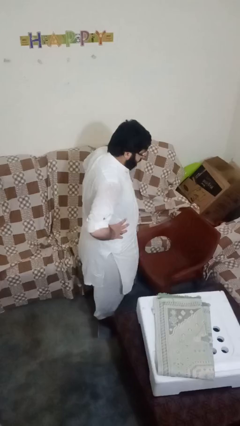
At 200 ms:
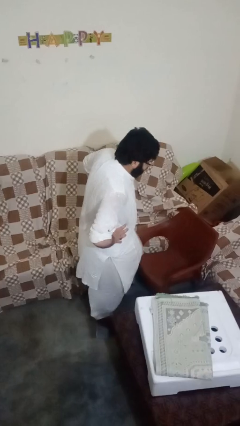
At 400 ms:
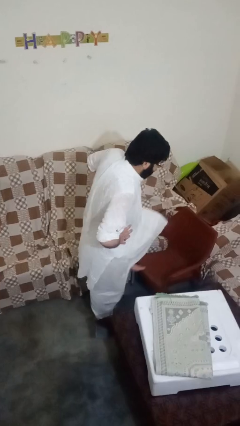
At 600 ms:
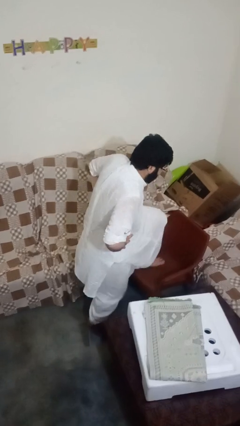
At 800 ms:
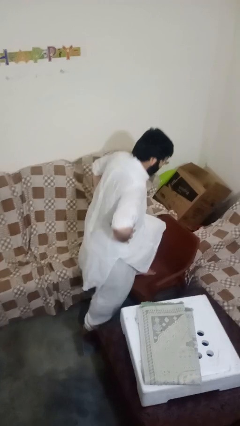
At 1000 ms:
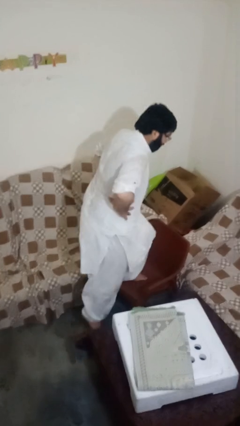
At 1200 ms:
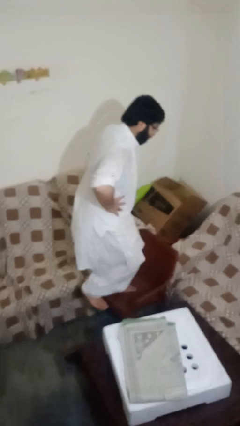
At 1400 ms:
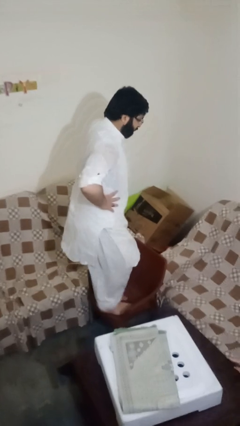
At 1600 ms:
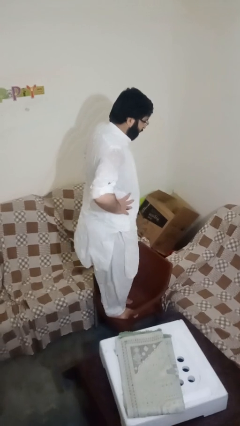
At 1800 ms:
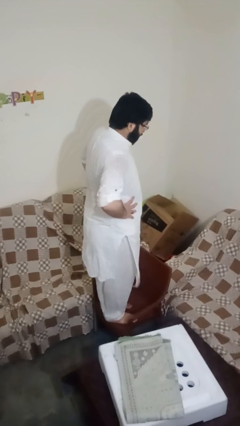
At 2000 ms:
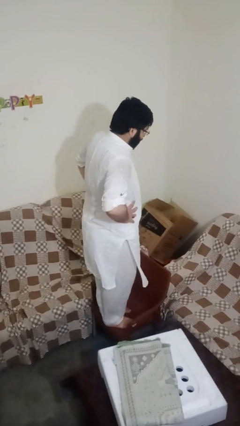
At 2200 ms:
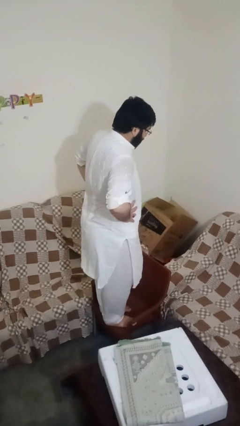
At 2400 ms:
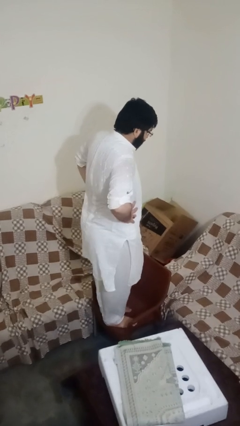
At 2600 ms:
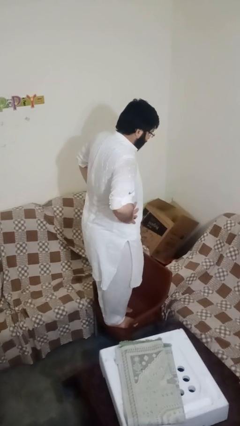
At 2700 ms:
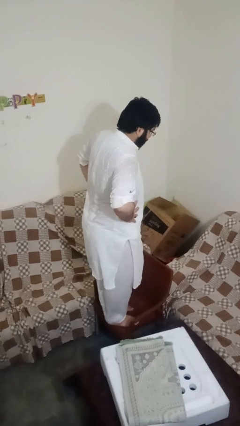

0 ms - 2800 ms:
person climbs on chair

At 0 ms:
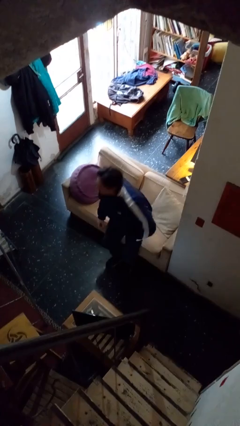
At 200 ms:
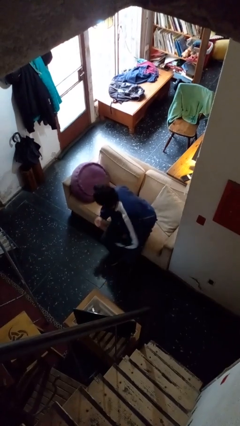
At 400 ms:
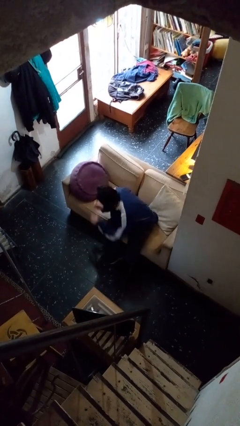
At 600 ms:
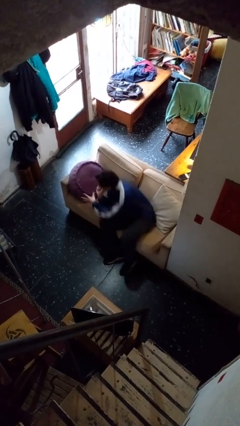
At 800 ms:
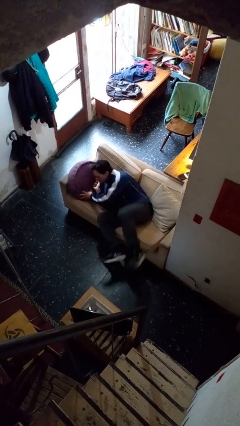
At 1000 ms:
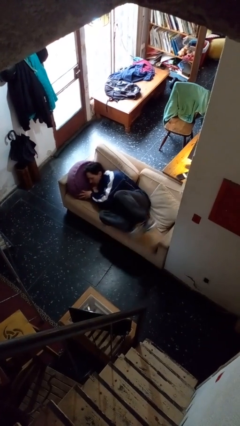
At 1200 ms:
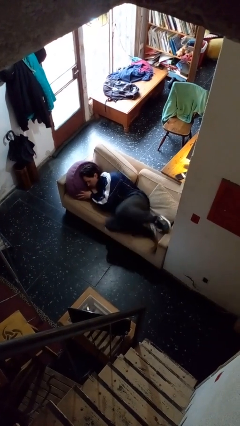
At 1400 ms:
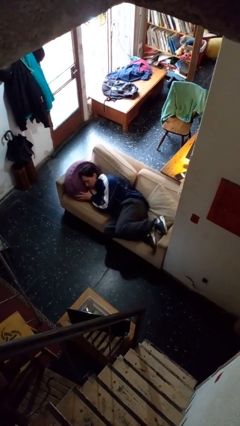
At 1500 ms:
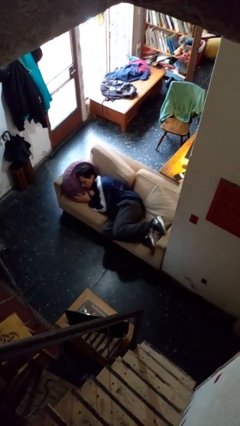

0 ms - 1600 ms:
person lies down on couch

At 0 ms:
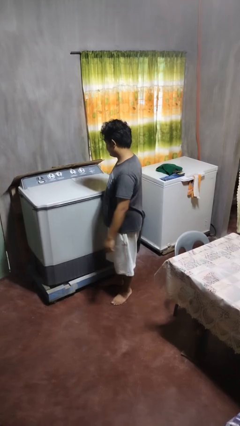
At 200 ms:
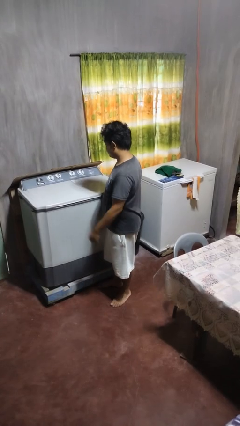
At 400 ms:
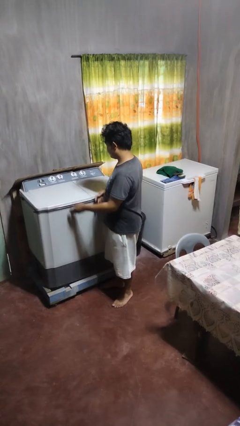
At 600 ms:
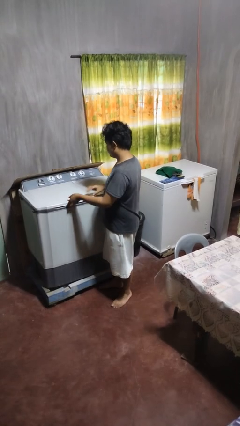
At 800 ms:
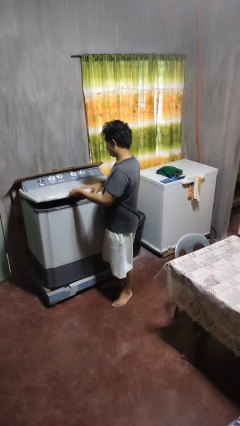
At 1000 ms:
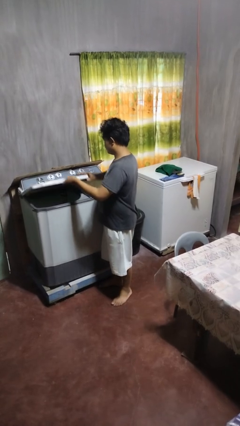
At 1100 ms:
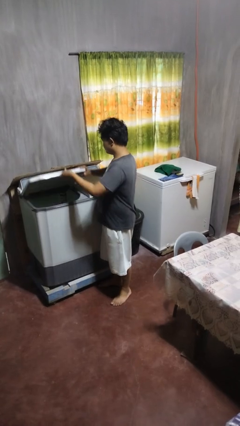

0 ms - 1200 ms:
person opens clothes washer

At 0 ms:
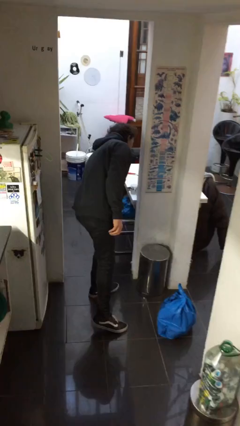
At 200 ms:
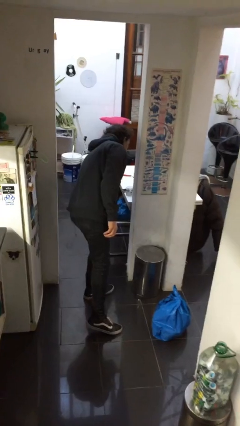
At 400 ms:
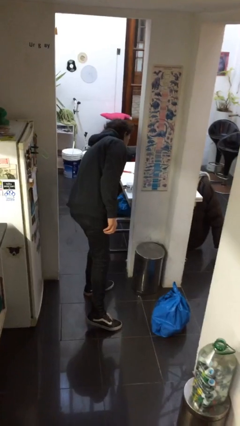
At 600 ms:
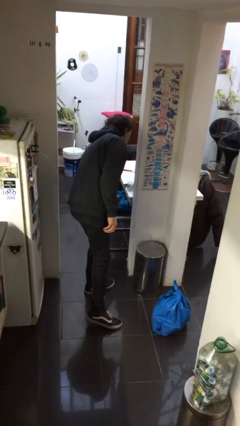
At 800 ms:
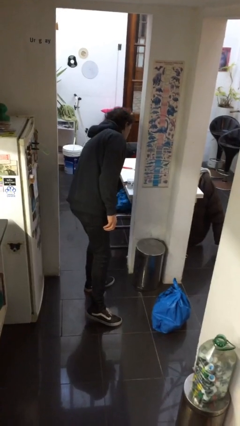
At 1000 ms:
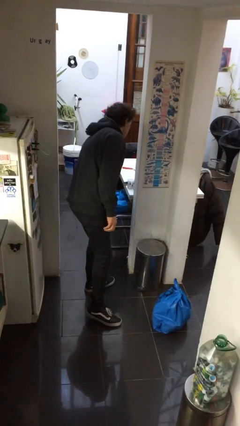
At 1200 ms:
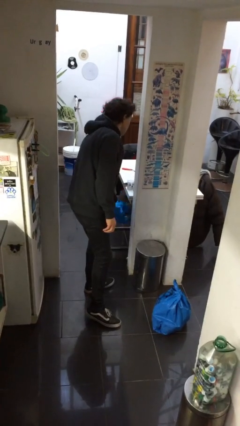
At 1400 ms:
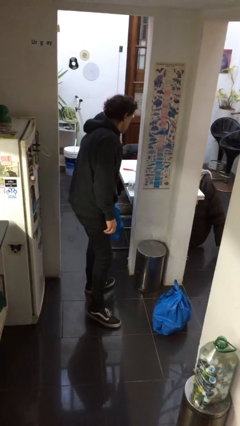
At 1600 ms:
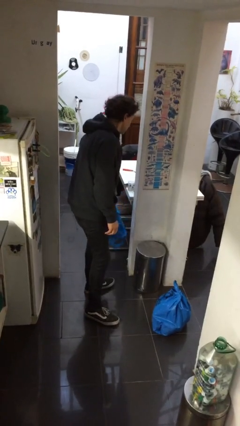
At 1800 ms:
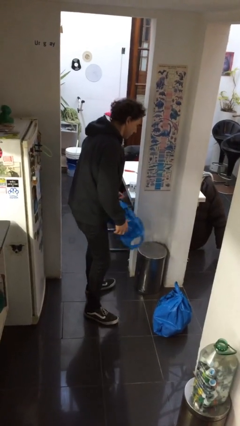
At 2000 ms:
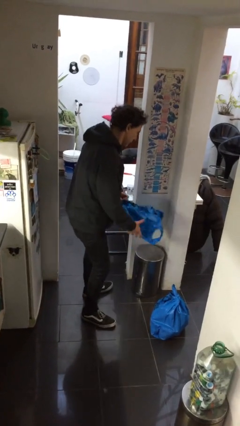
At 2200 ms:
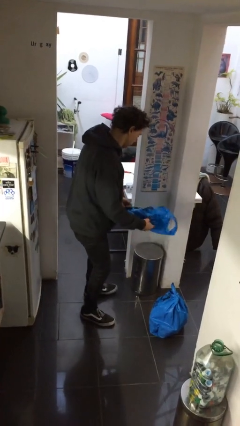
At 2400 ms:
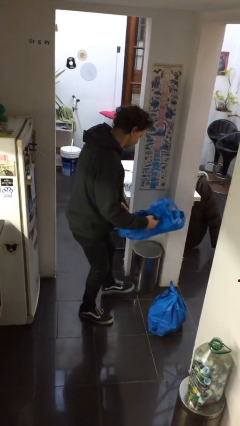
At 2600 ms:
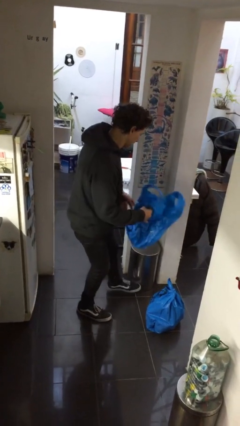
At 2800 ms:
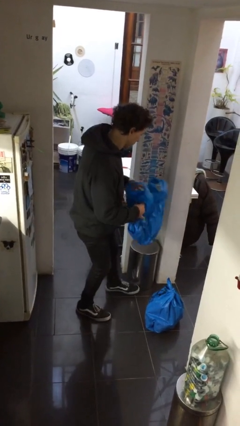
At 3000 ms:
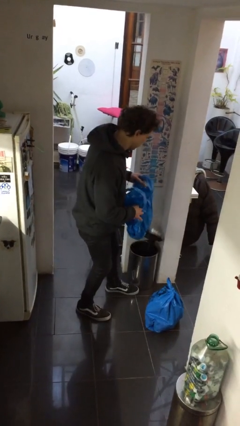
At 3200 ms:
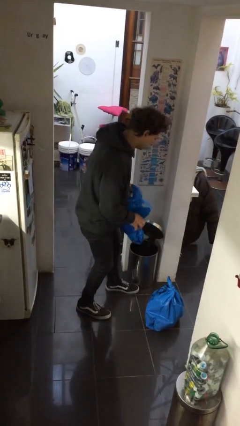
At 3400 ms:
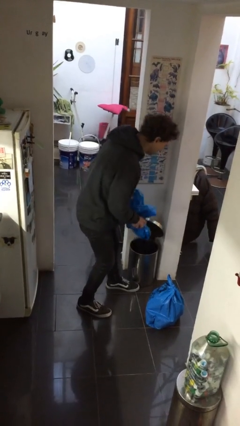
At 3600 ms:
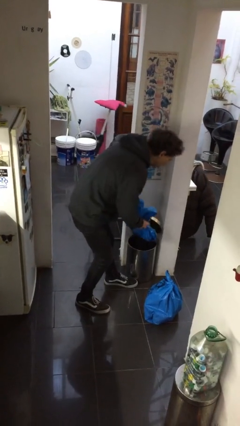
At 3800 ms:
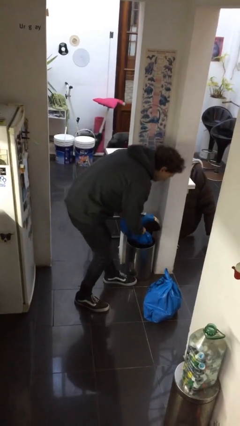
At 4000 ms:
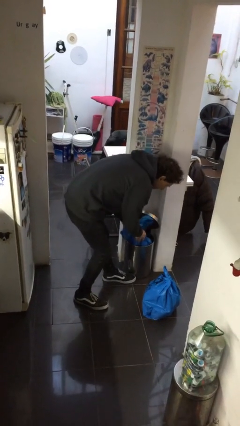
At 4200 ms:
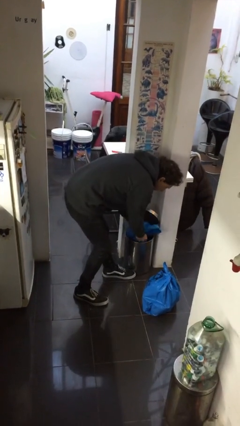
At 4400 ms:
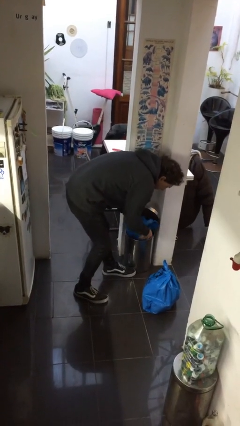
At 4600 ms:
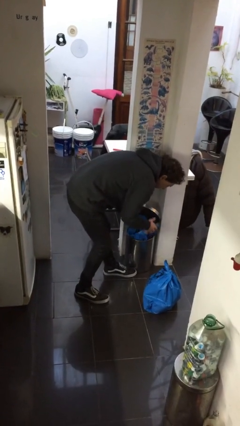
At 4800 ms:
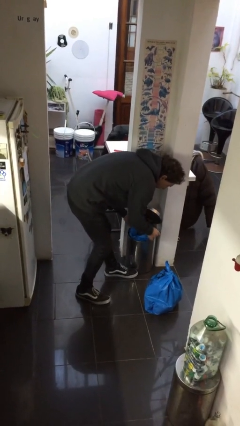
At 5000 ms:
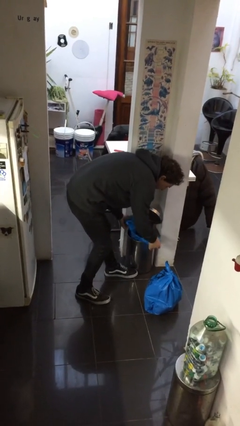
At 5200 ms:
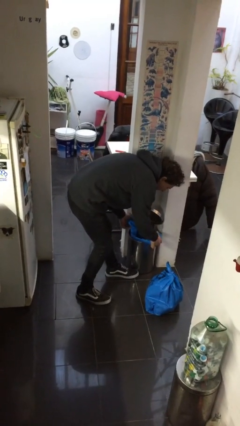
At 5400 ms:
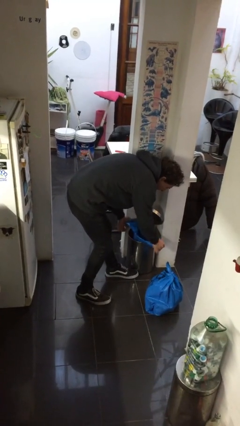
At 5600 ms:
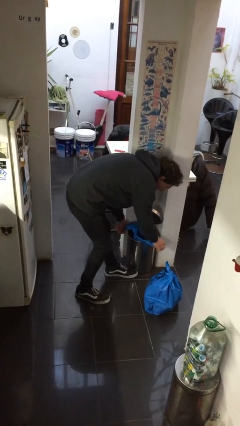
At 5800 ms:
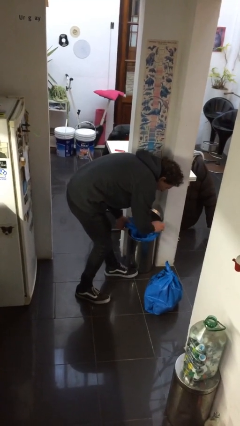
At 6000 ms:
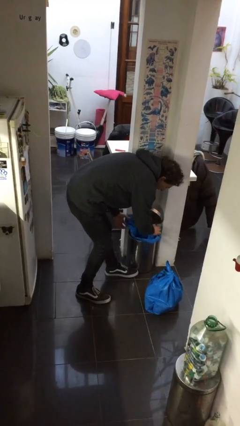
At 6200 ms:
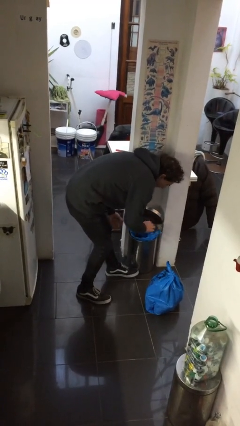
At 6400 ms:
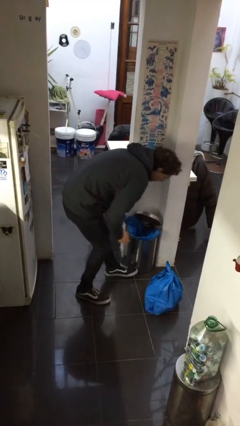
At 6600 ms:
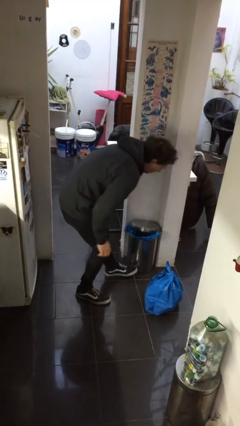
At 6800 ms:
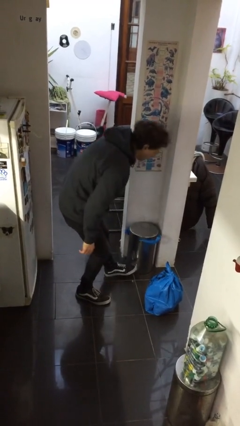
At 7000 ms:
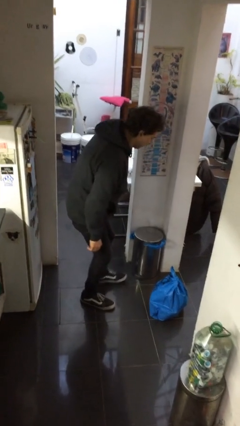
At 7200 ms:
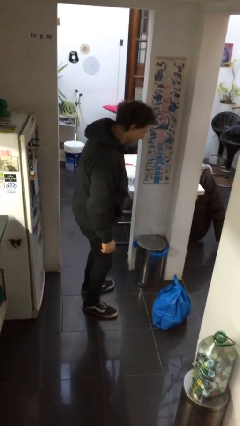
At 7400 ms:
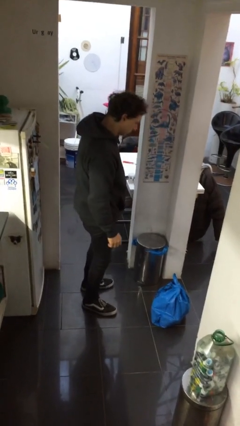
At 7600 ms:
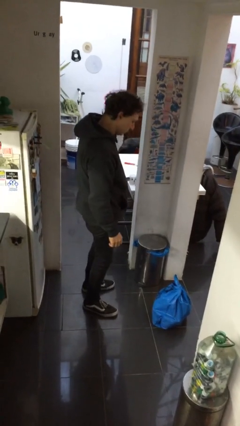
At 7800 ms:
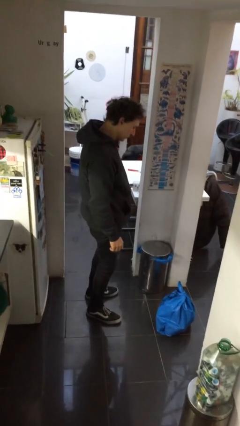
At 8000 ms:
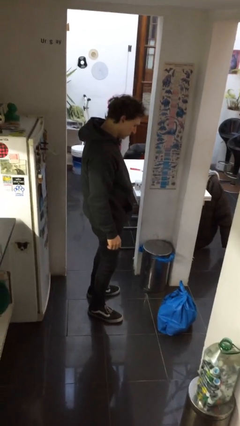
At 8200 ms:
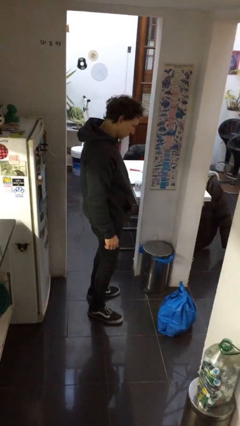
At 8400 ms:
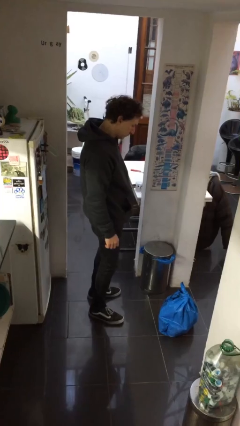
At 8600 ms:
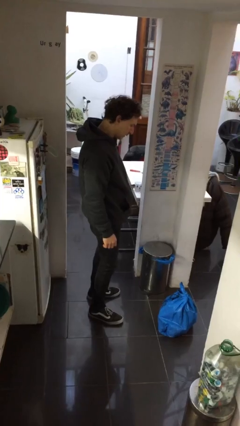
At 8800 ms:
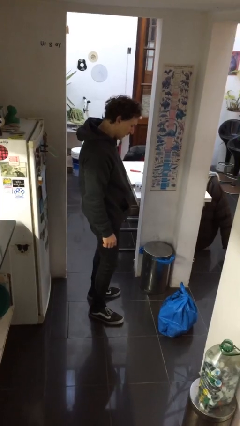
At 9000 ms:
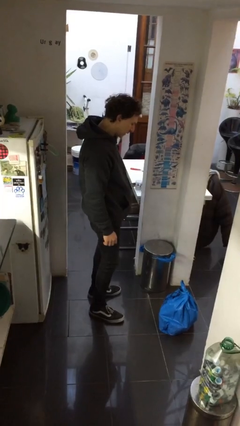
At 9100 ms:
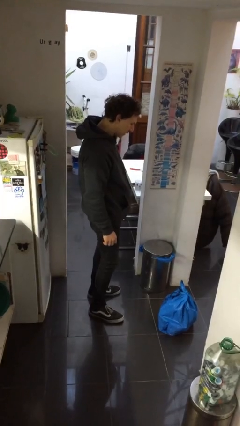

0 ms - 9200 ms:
person inserts trashbag into trashcan

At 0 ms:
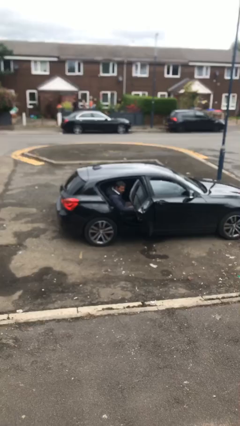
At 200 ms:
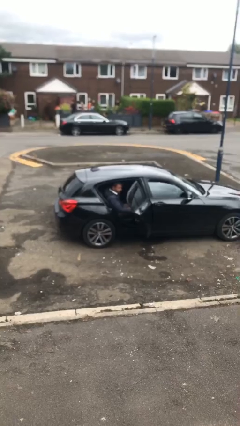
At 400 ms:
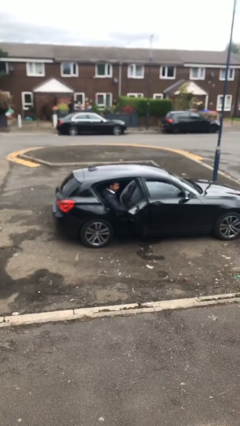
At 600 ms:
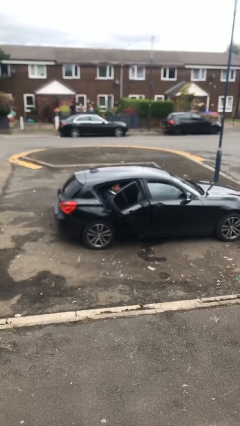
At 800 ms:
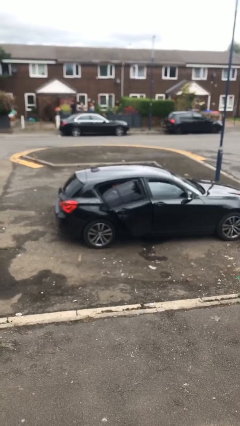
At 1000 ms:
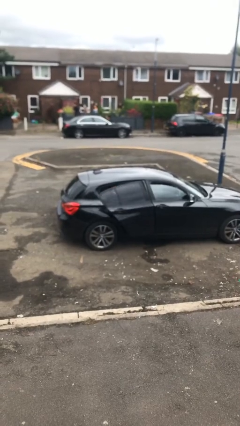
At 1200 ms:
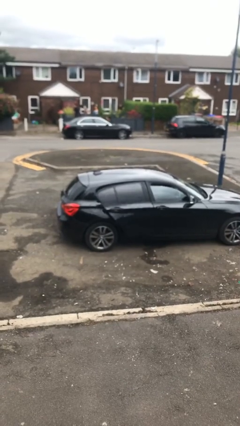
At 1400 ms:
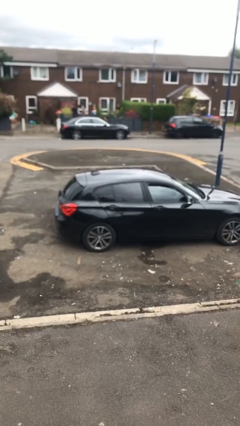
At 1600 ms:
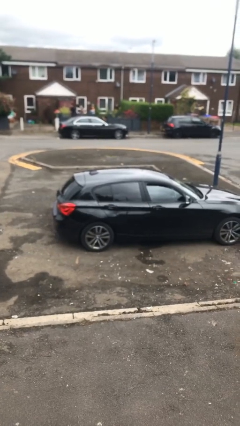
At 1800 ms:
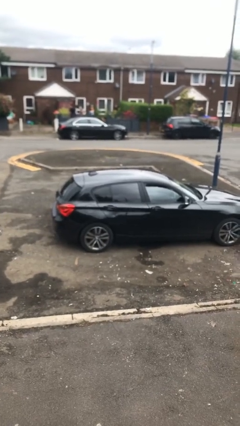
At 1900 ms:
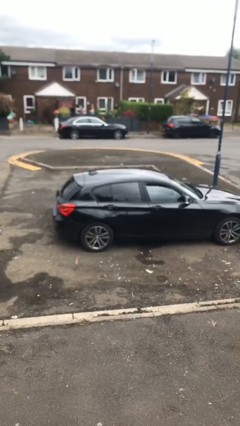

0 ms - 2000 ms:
person closes car door

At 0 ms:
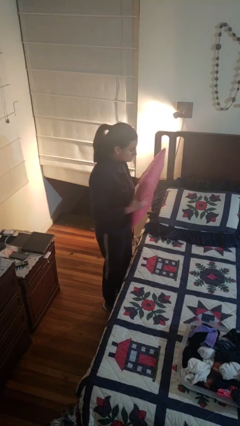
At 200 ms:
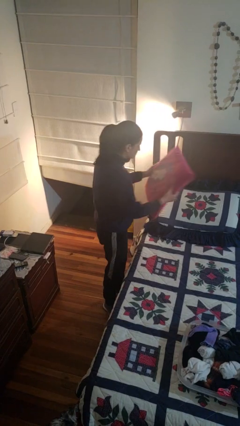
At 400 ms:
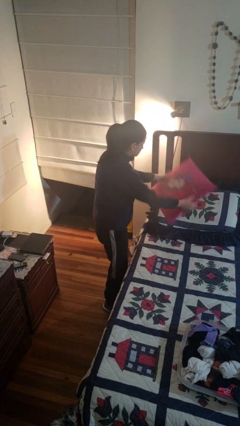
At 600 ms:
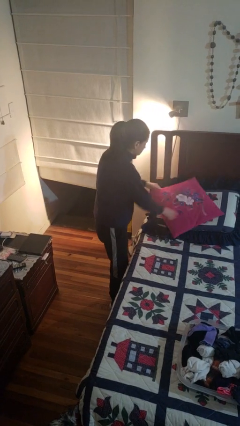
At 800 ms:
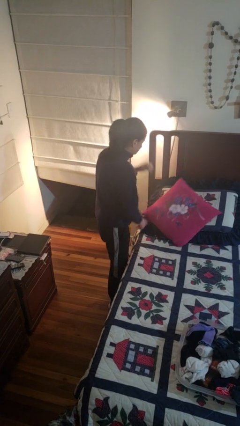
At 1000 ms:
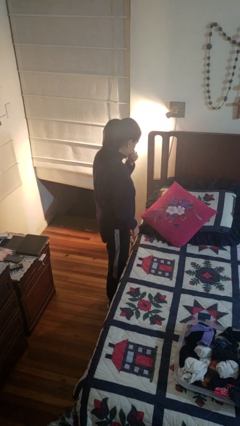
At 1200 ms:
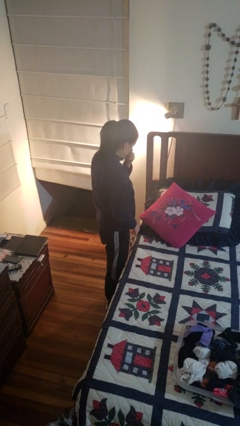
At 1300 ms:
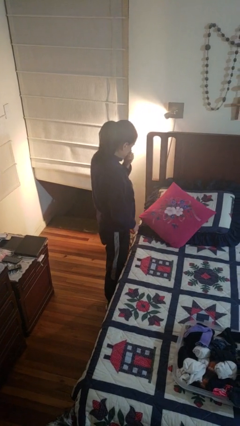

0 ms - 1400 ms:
person puts down object on bed
